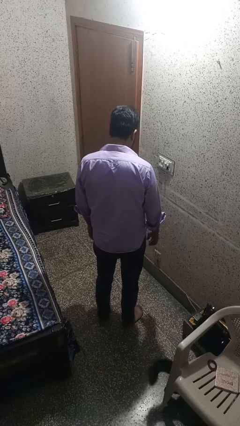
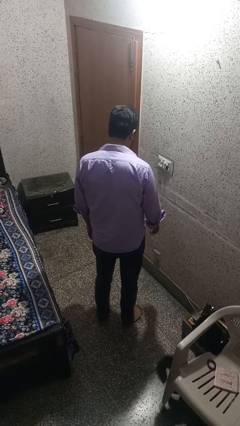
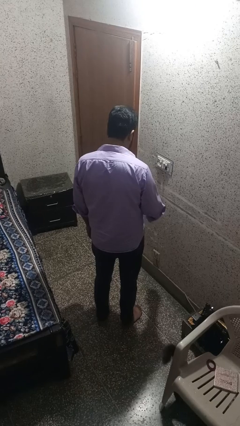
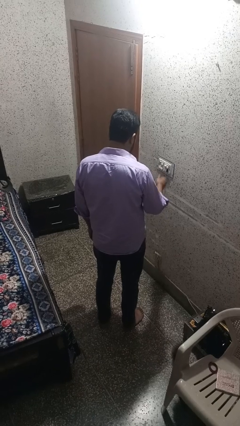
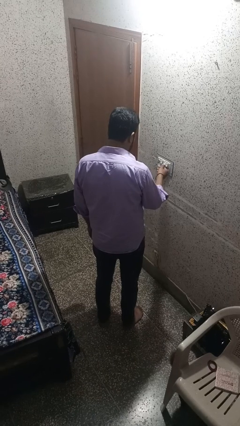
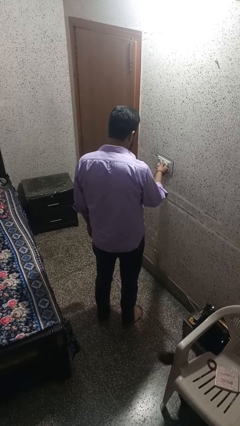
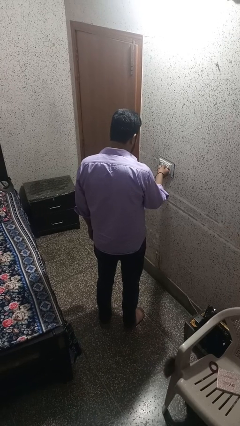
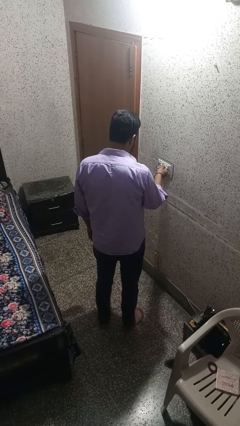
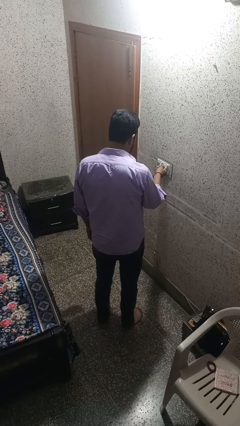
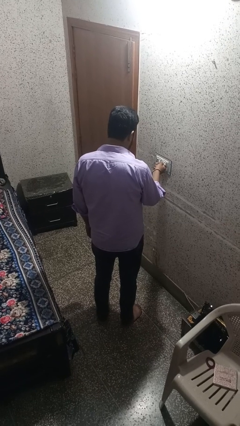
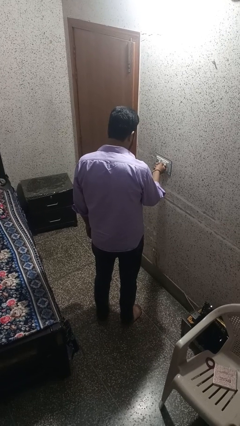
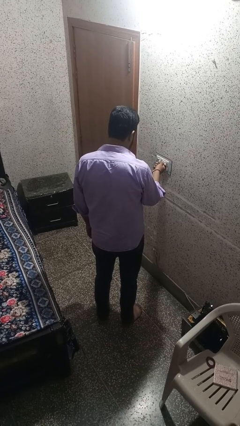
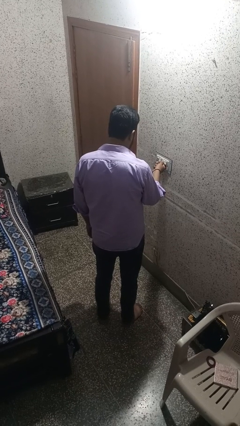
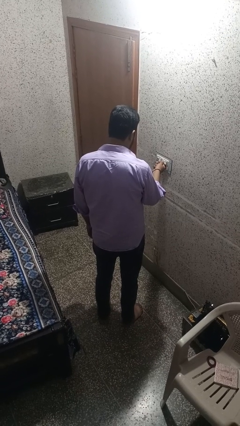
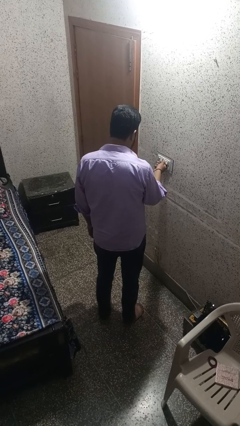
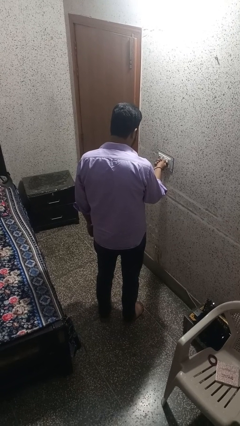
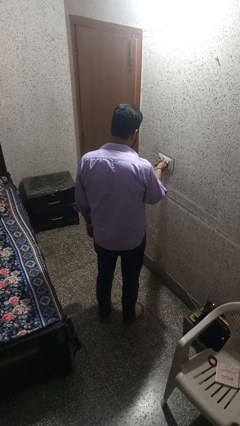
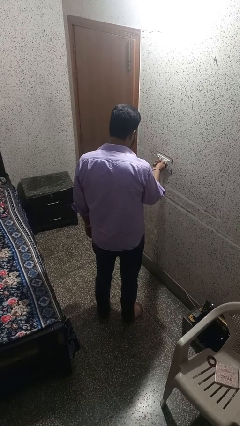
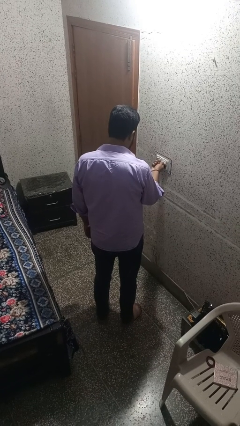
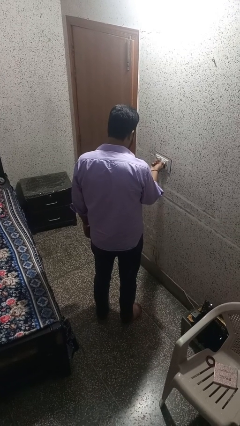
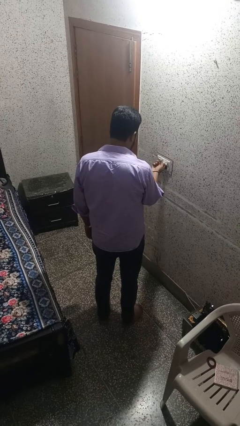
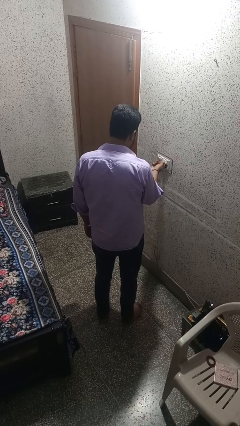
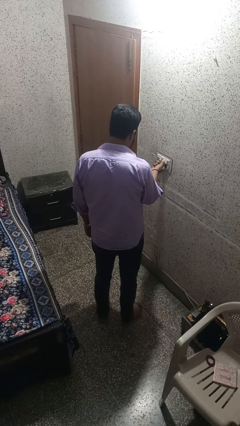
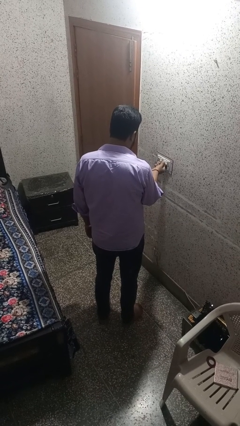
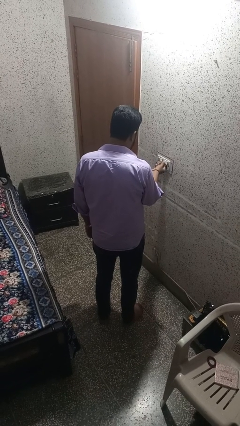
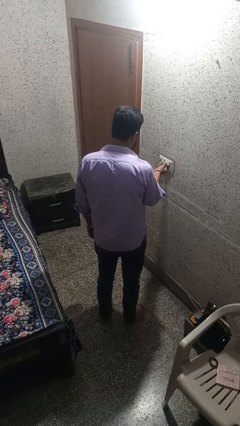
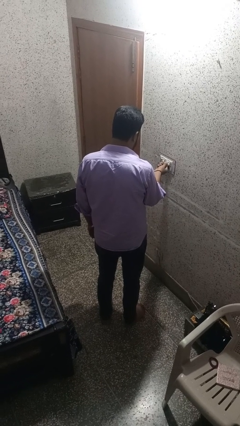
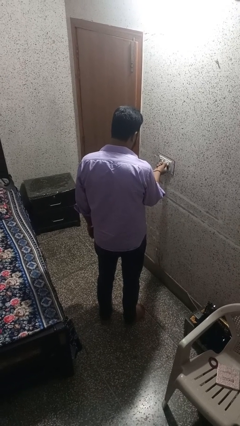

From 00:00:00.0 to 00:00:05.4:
person turns on fan

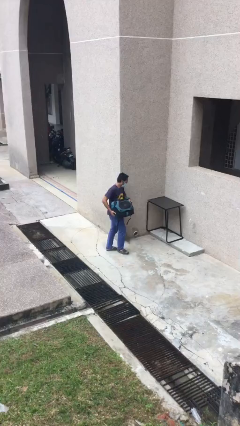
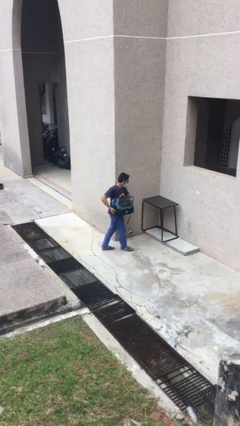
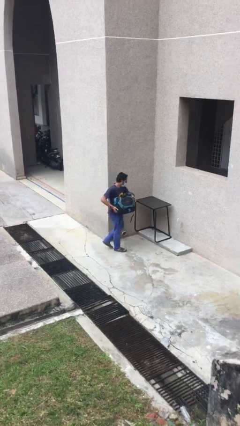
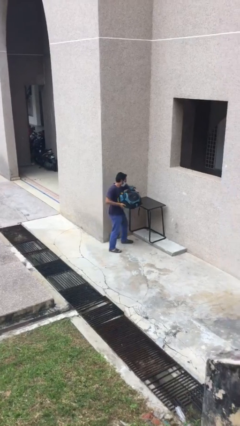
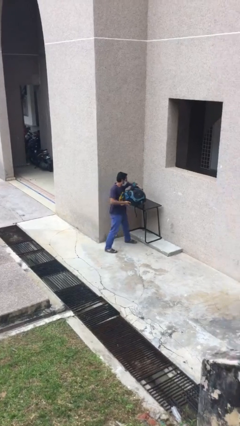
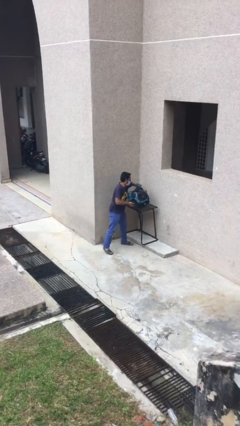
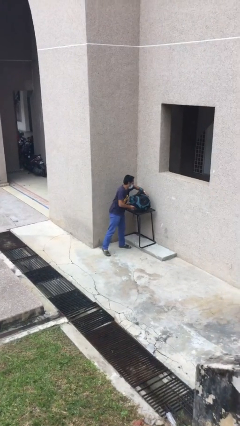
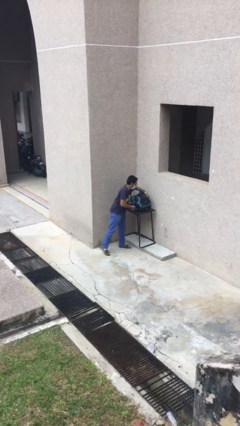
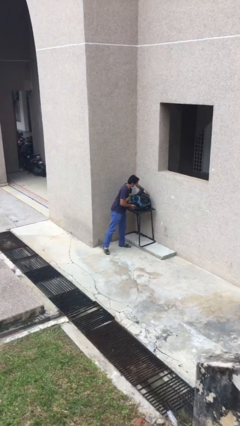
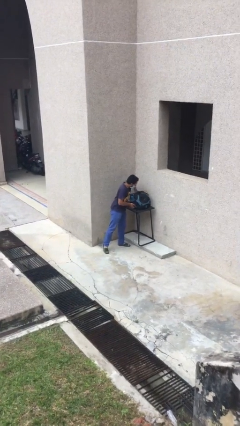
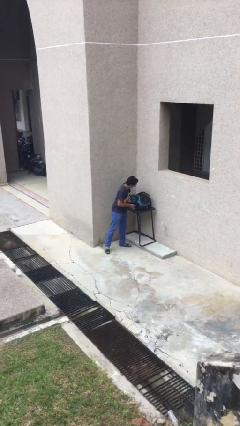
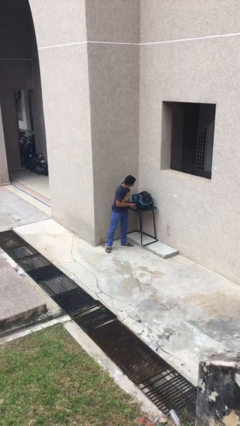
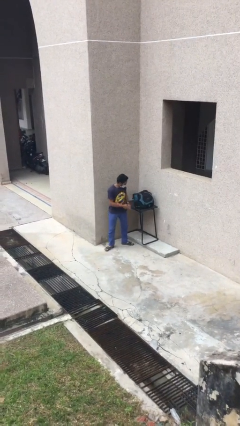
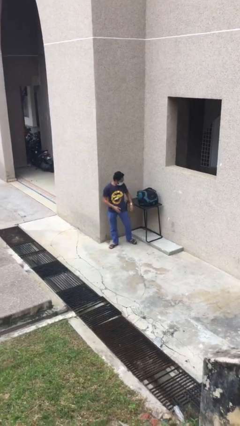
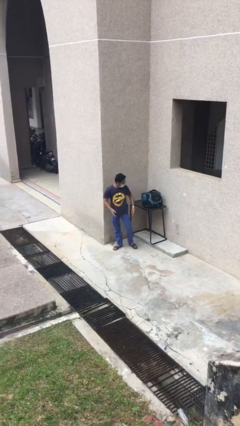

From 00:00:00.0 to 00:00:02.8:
person puts down object on table

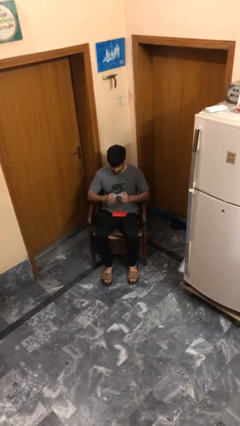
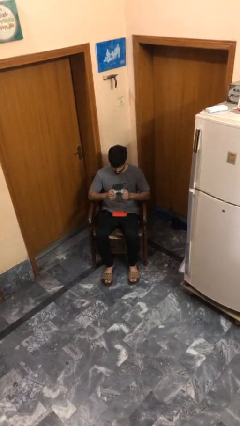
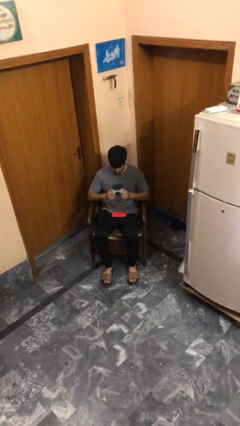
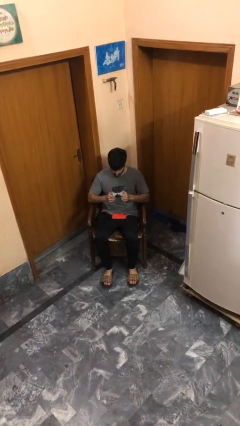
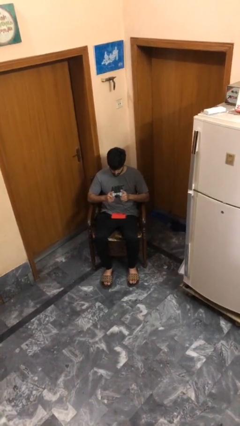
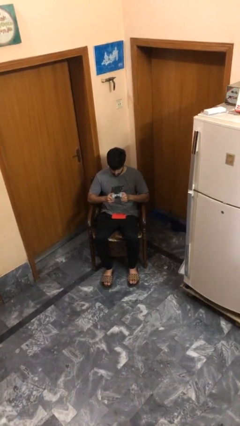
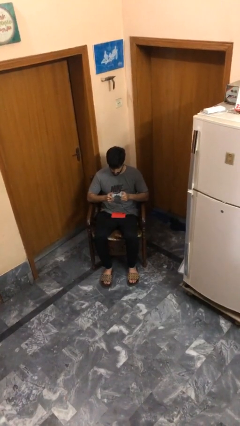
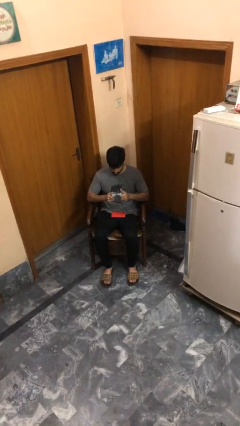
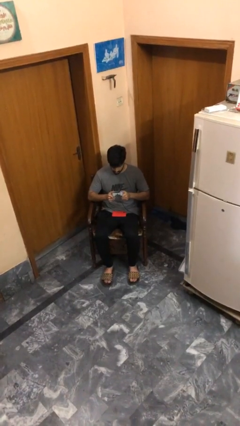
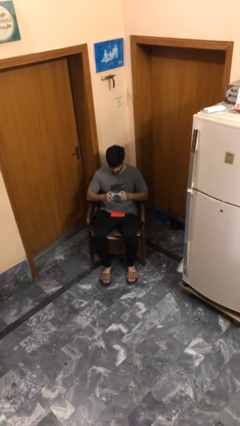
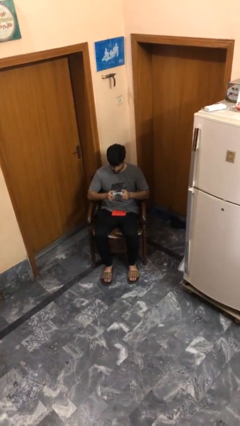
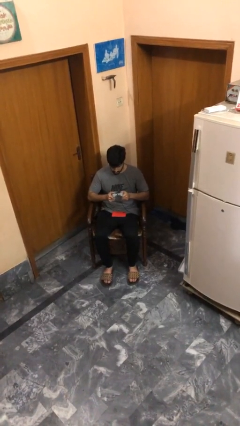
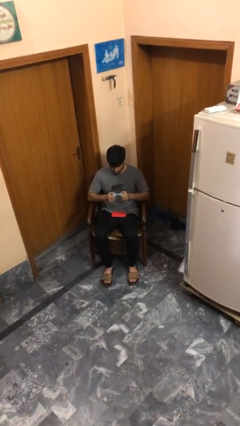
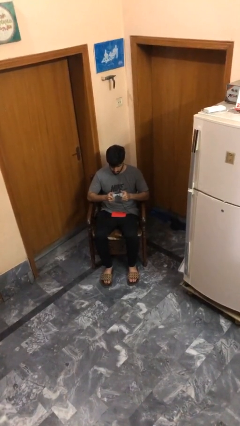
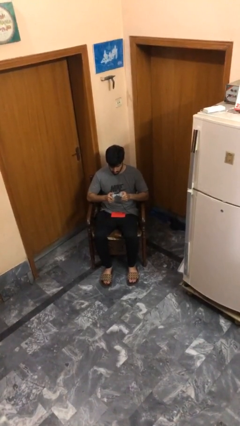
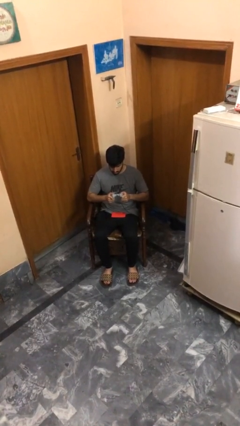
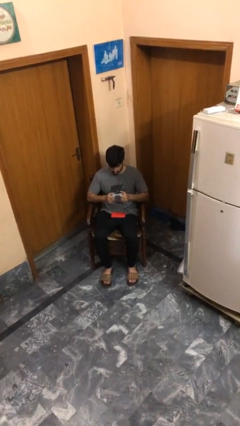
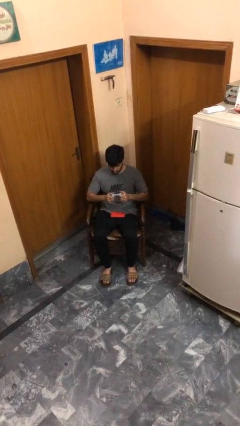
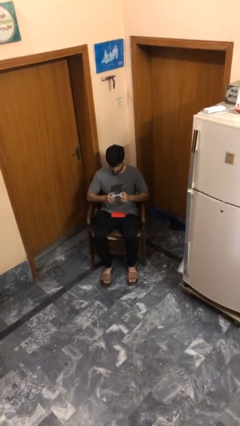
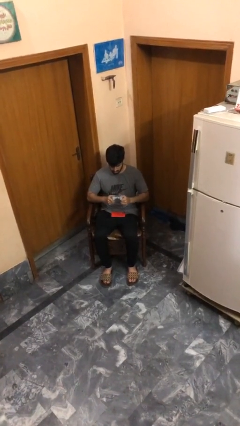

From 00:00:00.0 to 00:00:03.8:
person interacts with handheld game

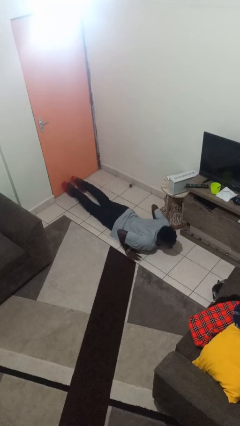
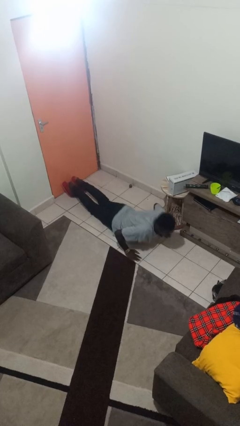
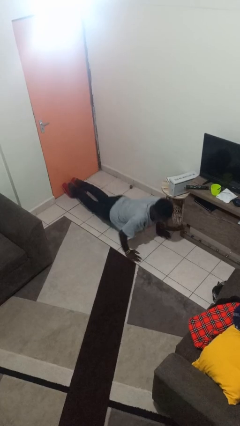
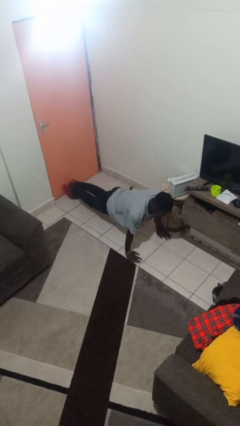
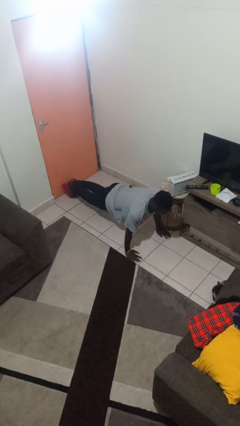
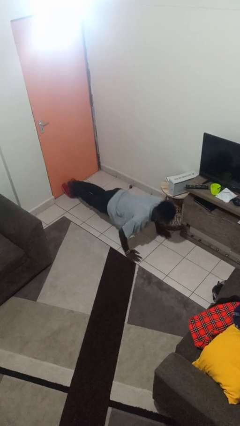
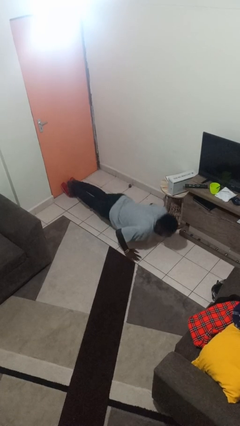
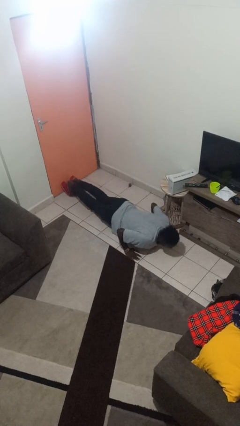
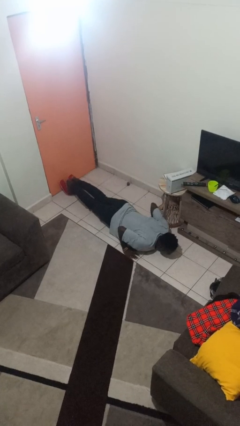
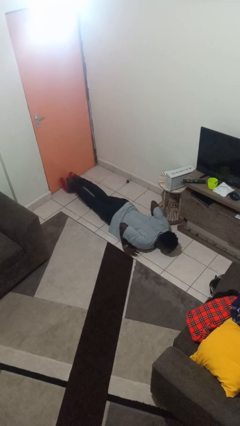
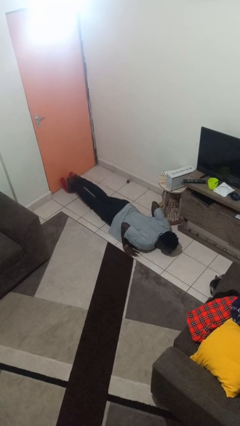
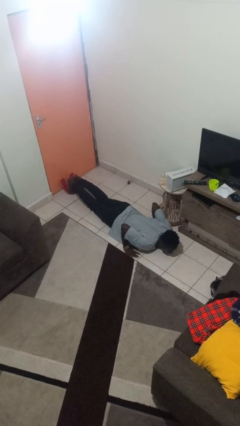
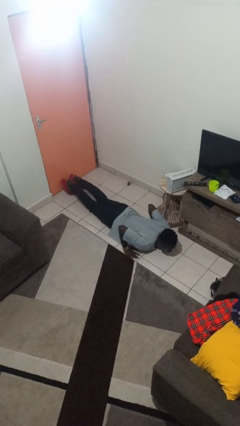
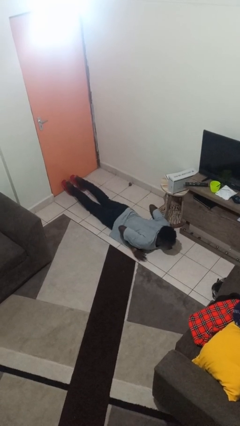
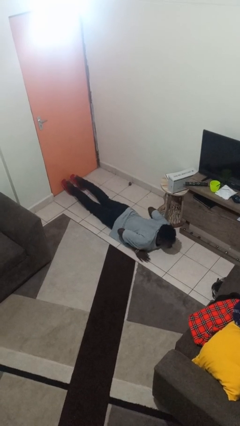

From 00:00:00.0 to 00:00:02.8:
person exercises with pushup

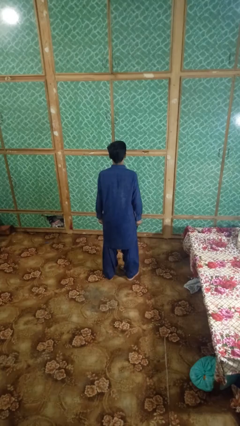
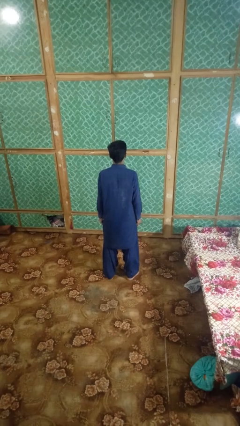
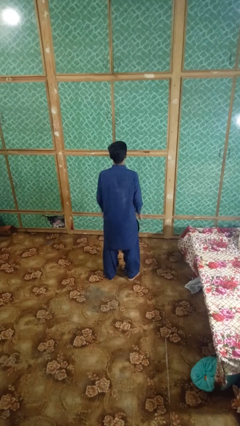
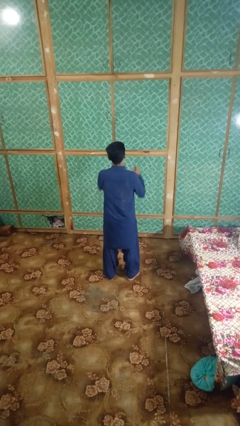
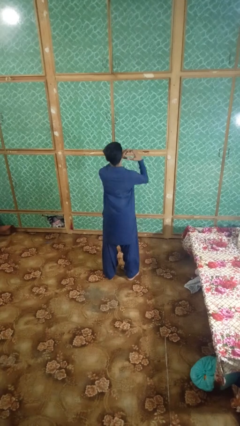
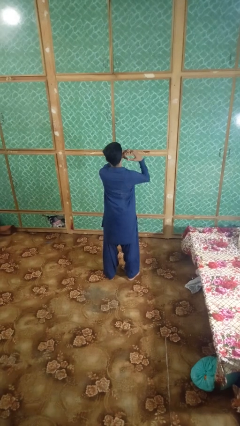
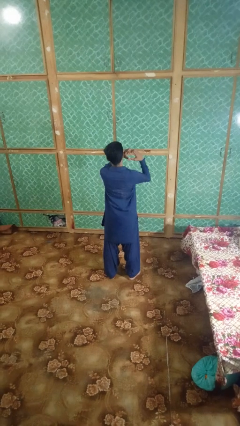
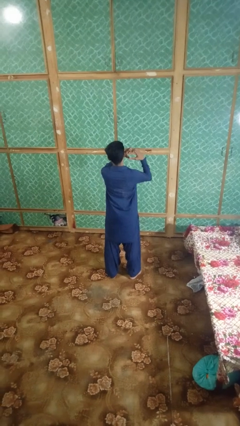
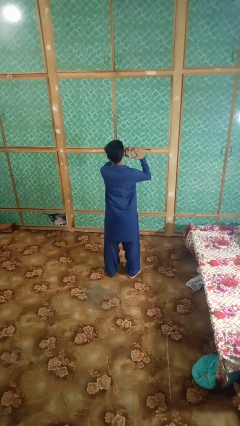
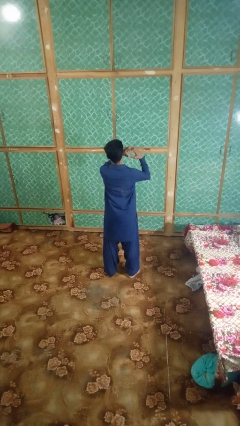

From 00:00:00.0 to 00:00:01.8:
person gestures heart

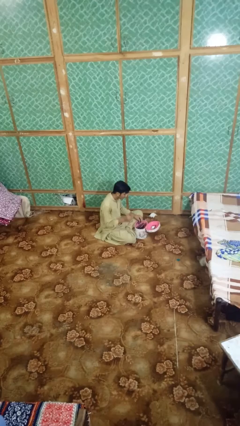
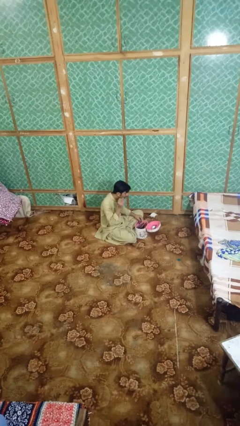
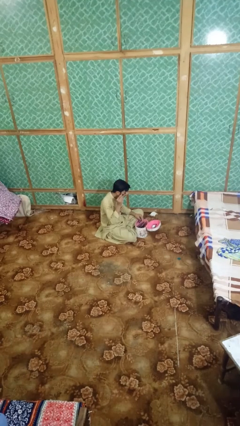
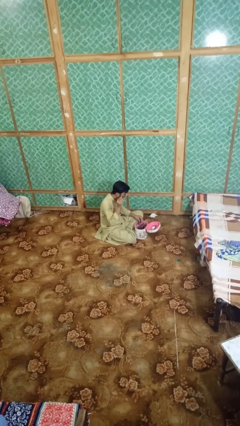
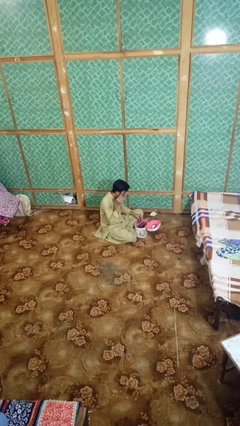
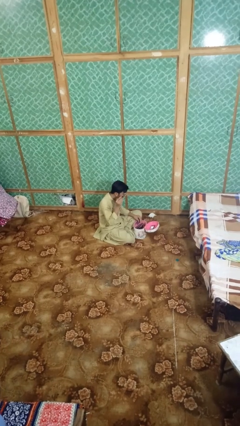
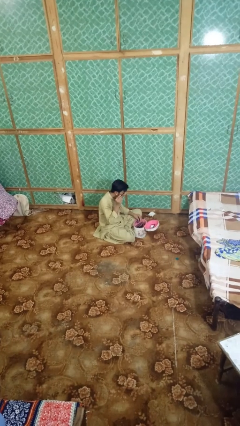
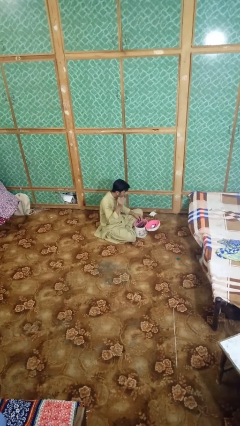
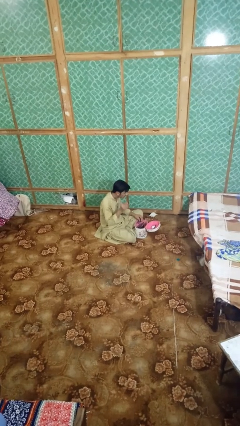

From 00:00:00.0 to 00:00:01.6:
person applies eye makeup
